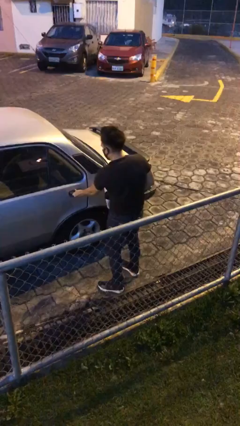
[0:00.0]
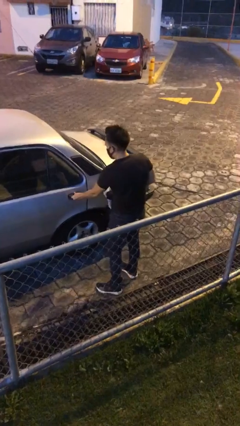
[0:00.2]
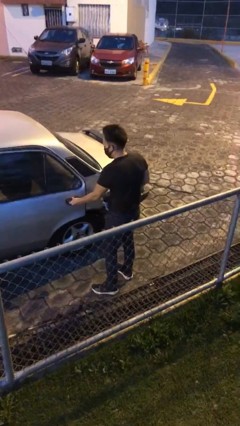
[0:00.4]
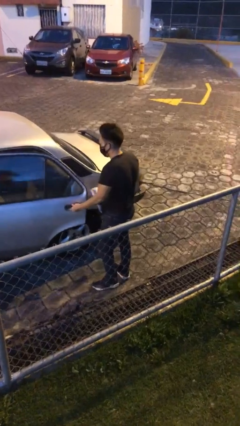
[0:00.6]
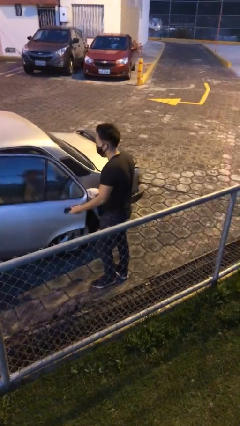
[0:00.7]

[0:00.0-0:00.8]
person opens car door

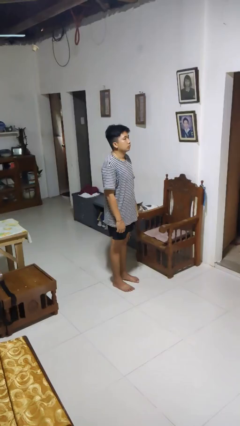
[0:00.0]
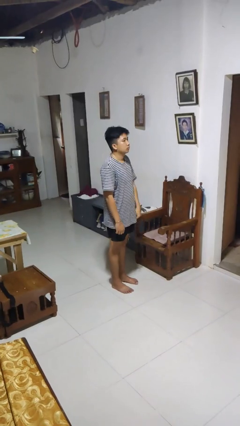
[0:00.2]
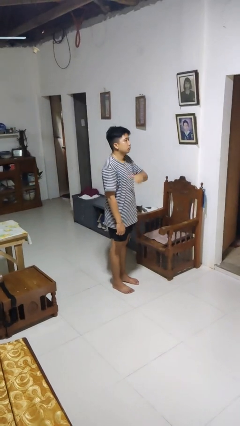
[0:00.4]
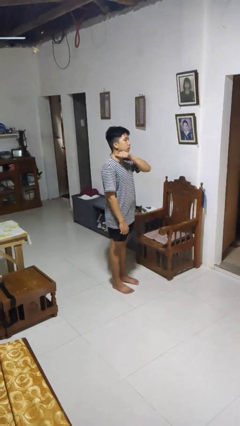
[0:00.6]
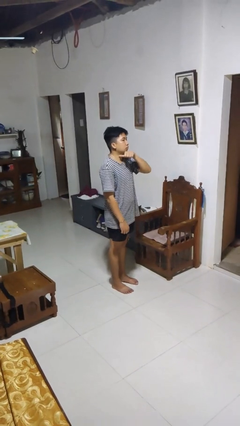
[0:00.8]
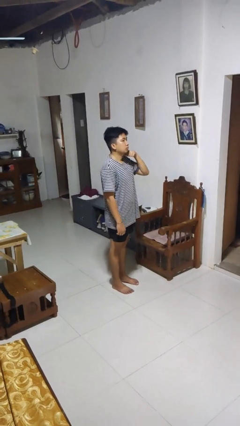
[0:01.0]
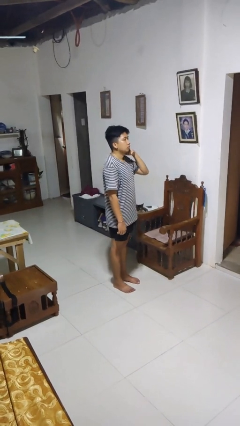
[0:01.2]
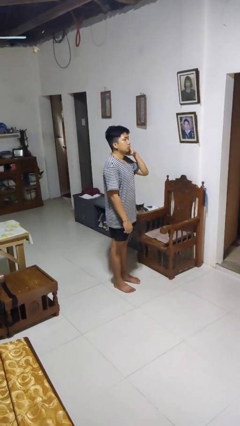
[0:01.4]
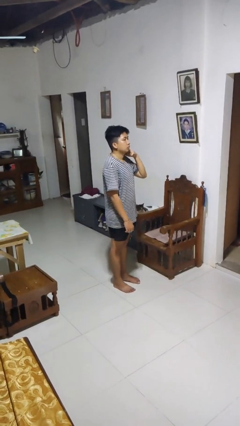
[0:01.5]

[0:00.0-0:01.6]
person gestures cut

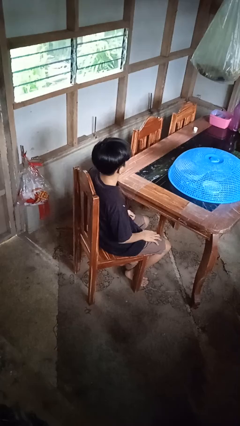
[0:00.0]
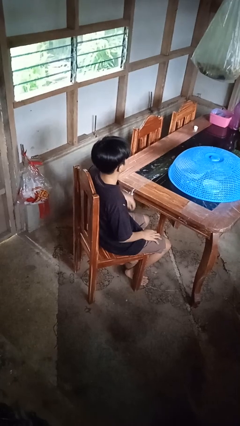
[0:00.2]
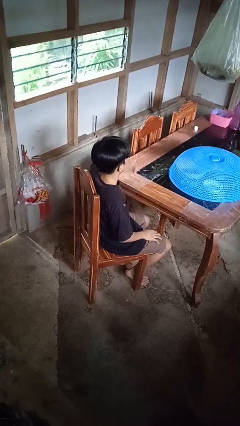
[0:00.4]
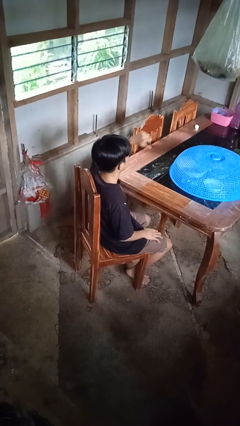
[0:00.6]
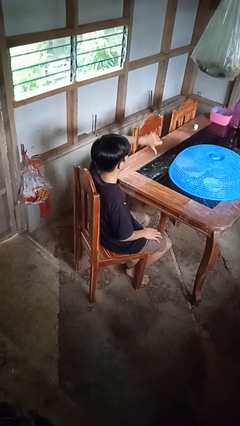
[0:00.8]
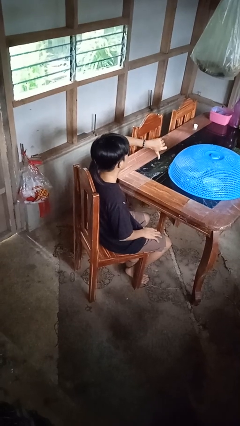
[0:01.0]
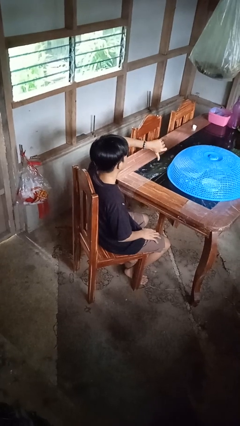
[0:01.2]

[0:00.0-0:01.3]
person gestures thumbs down

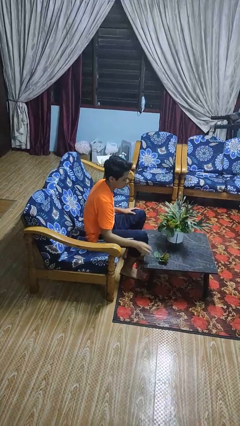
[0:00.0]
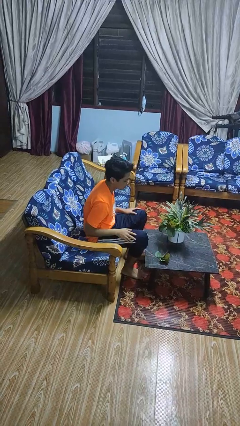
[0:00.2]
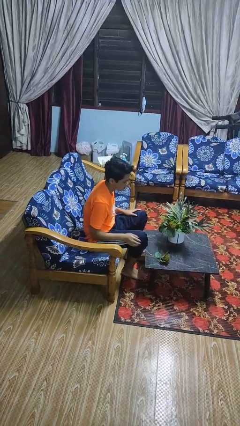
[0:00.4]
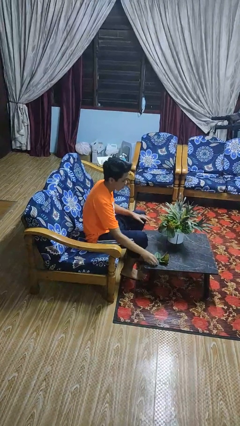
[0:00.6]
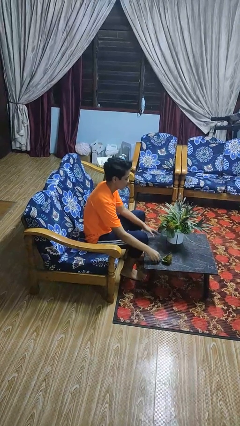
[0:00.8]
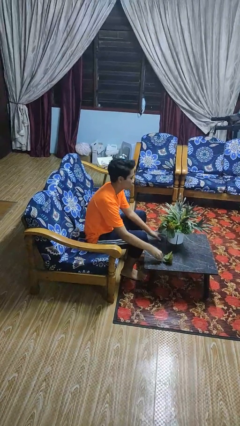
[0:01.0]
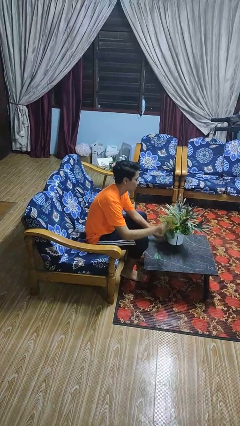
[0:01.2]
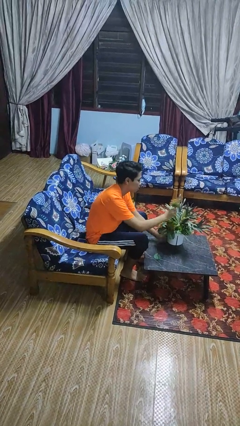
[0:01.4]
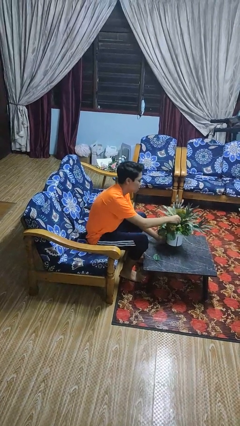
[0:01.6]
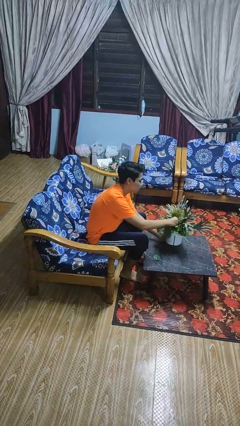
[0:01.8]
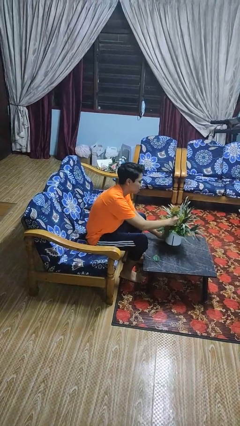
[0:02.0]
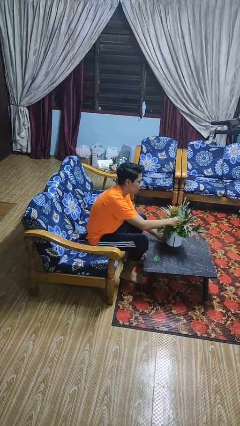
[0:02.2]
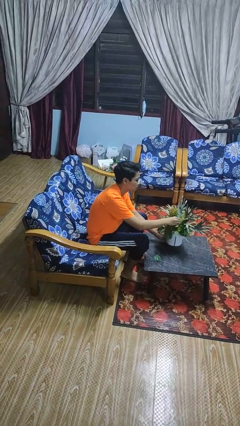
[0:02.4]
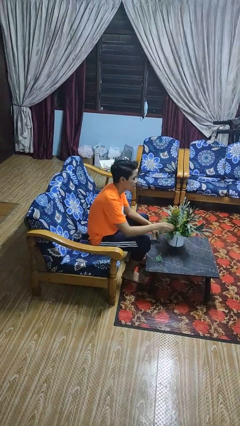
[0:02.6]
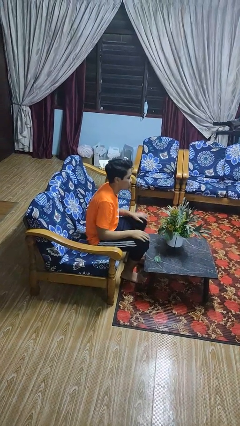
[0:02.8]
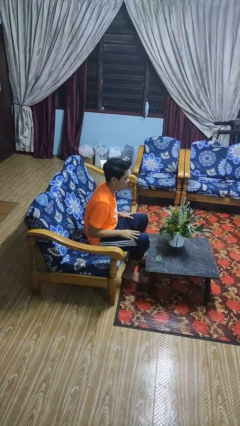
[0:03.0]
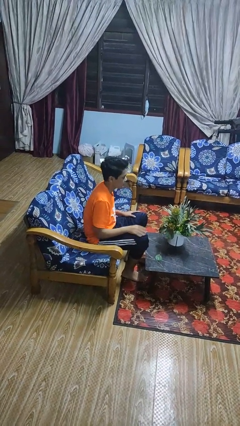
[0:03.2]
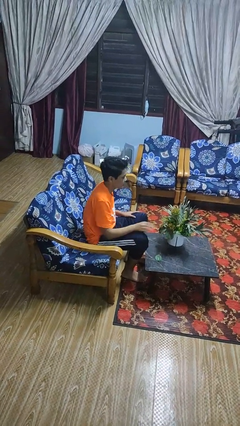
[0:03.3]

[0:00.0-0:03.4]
person arranges flowers in vase

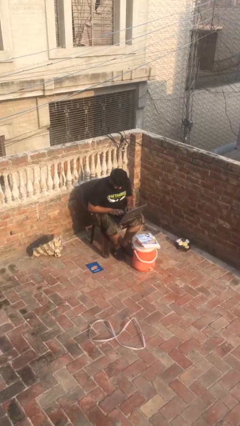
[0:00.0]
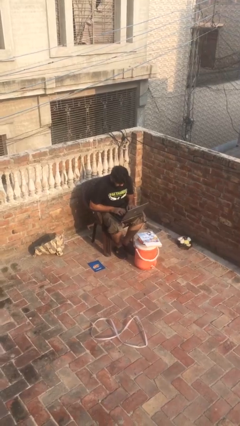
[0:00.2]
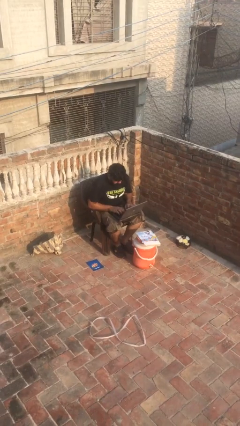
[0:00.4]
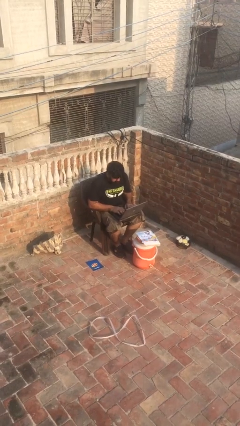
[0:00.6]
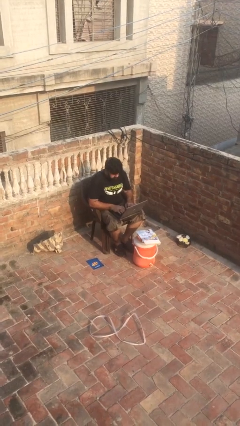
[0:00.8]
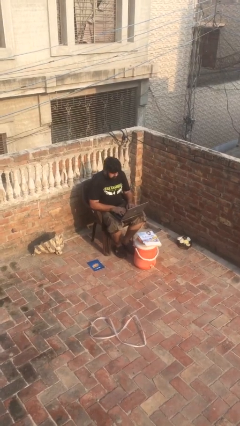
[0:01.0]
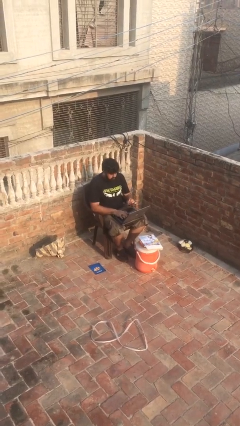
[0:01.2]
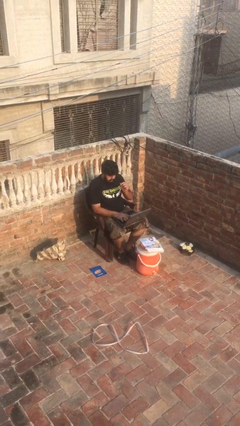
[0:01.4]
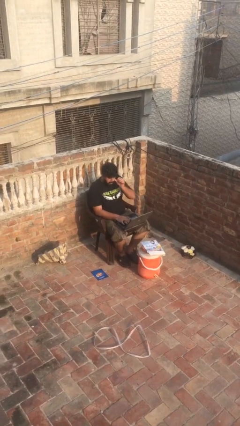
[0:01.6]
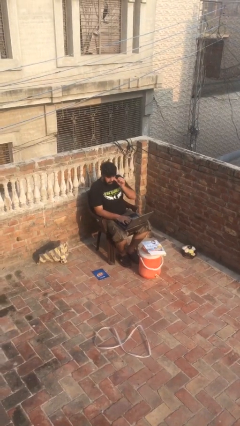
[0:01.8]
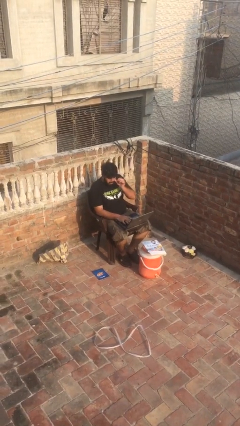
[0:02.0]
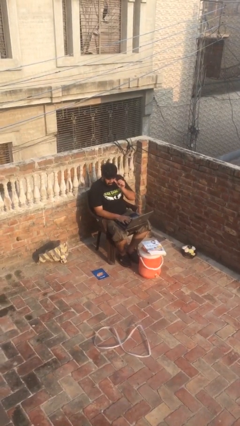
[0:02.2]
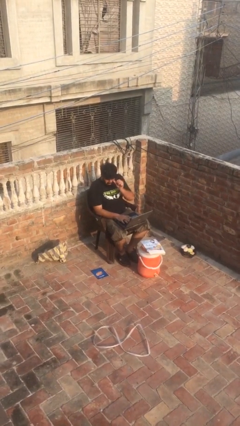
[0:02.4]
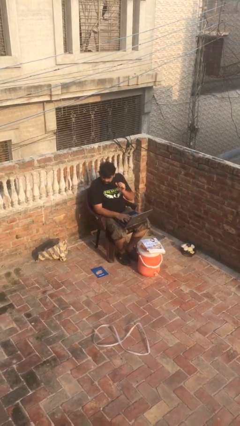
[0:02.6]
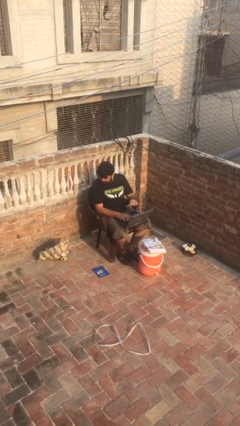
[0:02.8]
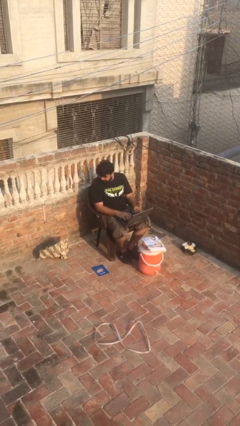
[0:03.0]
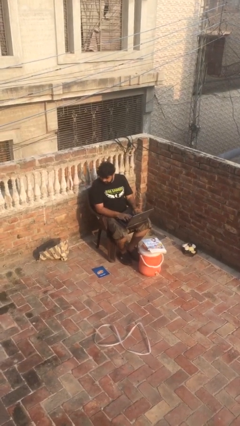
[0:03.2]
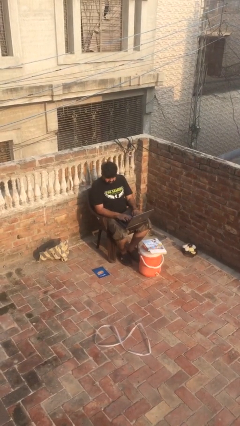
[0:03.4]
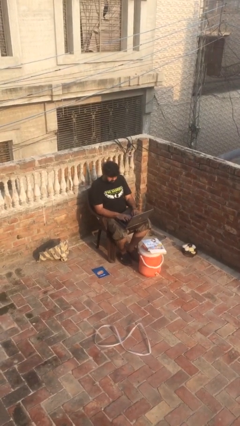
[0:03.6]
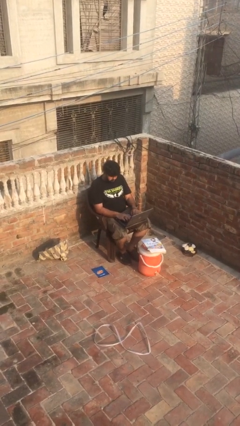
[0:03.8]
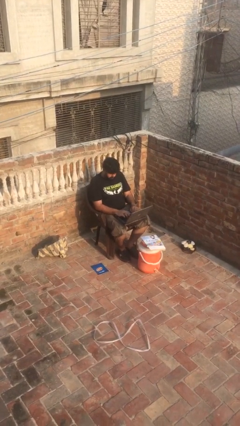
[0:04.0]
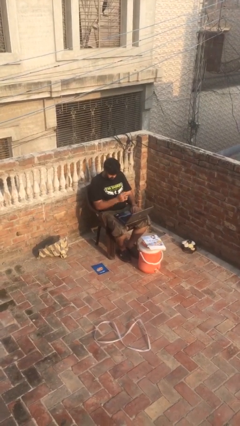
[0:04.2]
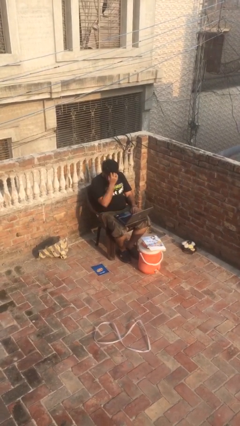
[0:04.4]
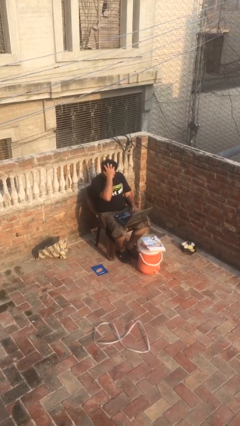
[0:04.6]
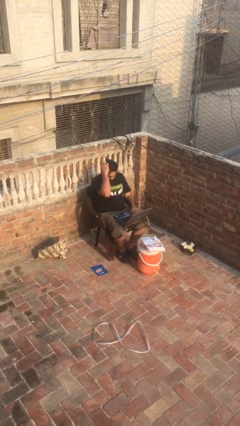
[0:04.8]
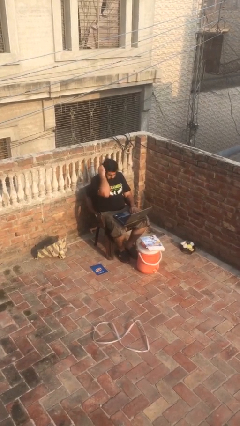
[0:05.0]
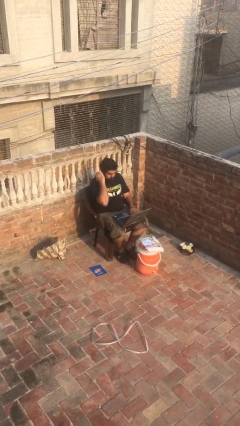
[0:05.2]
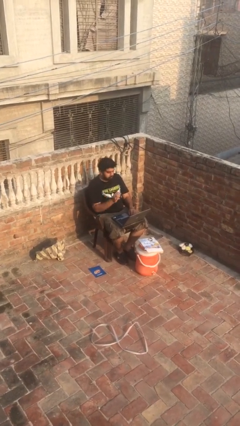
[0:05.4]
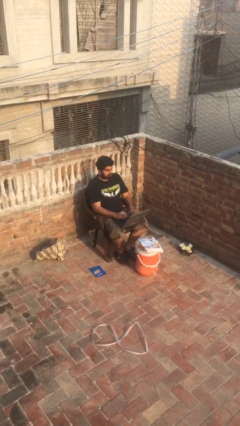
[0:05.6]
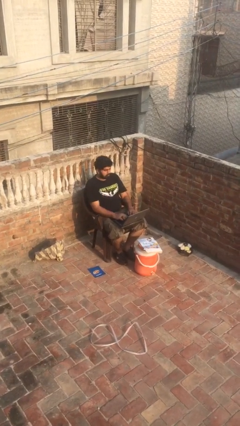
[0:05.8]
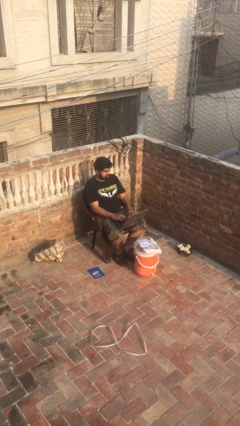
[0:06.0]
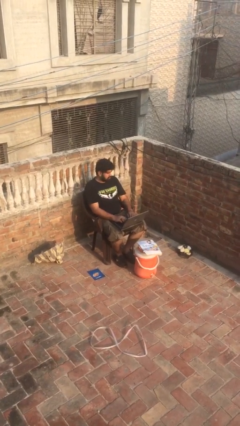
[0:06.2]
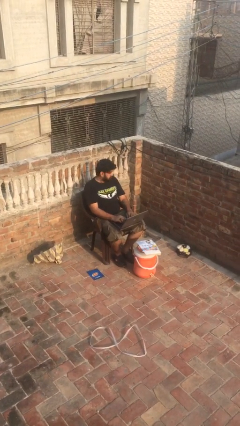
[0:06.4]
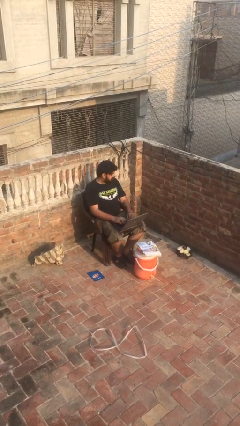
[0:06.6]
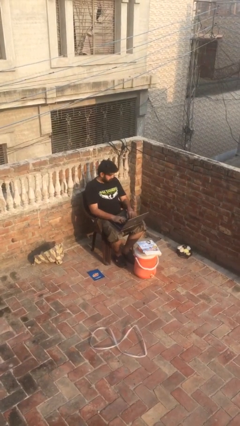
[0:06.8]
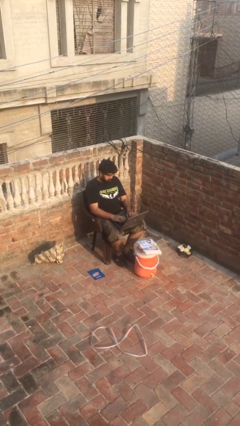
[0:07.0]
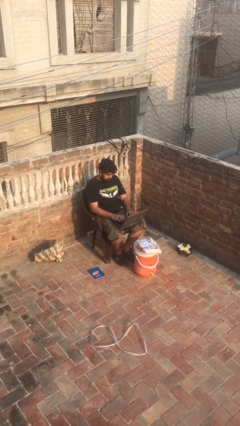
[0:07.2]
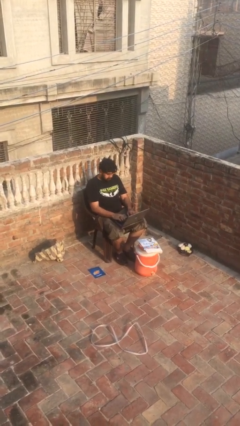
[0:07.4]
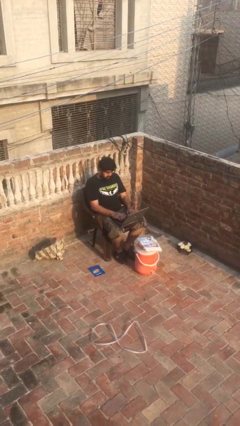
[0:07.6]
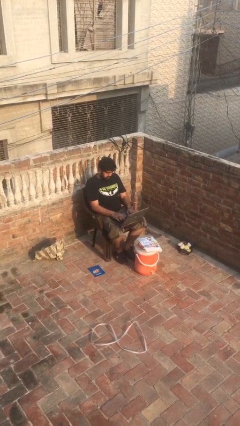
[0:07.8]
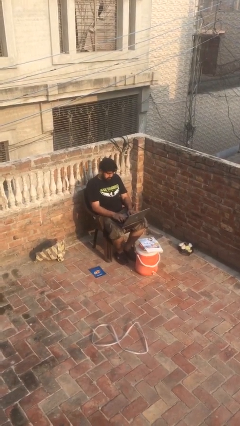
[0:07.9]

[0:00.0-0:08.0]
person interacts with laptop

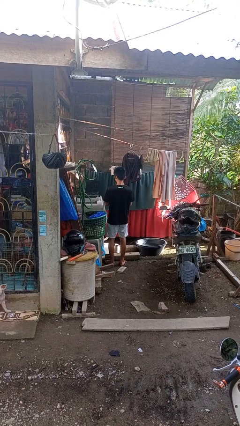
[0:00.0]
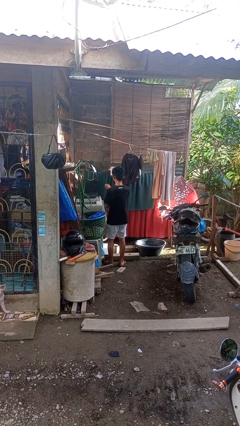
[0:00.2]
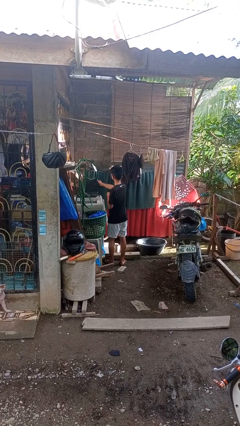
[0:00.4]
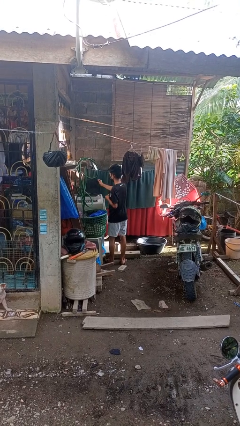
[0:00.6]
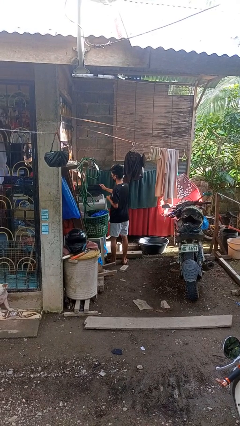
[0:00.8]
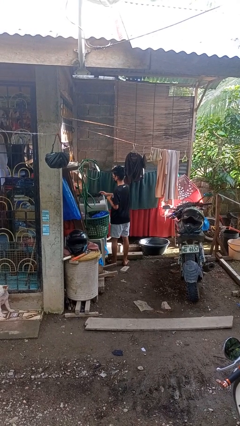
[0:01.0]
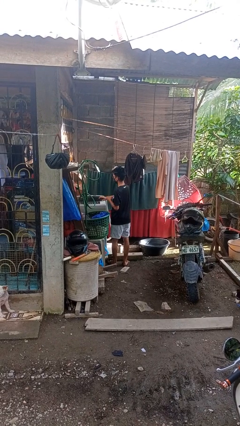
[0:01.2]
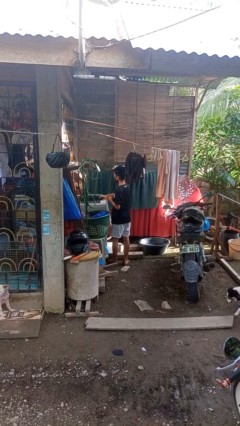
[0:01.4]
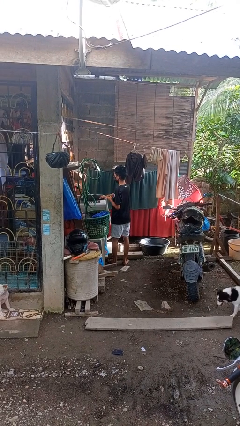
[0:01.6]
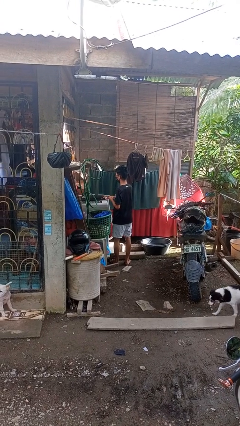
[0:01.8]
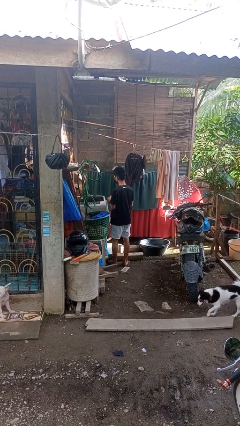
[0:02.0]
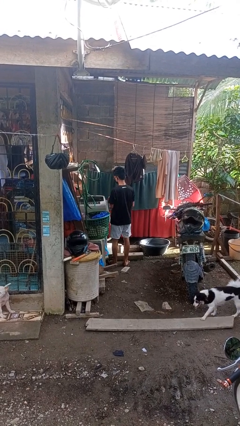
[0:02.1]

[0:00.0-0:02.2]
person closes clothes washer

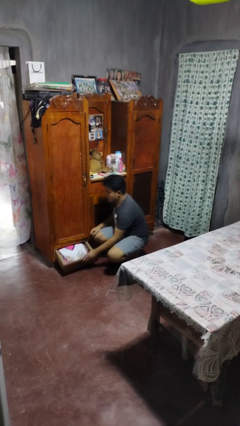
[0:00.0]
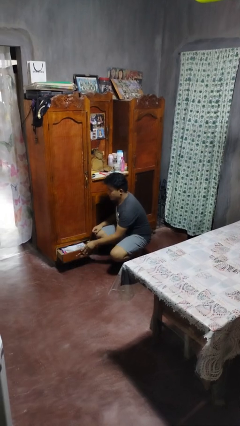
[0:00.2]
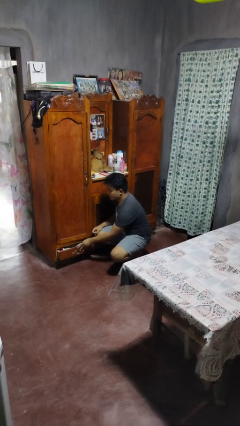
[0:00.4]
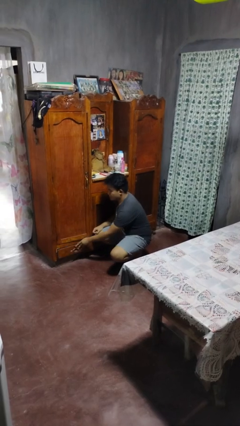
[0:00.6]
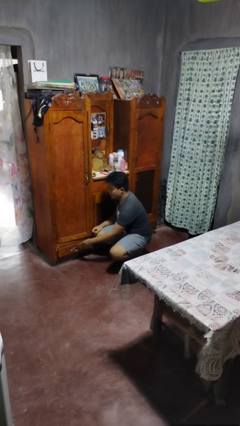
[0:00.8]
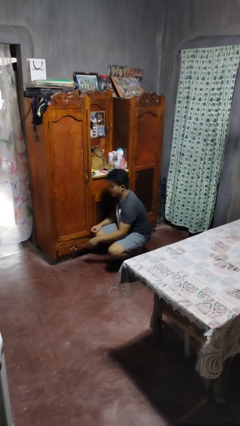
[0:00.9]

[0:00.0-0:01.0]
person closes dresser drawer
